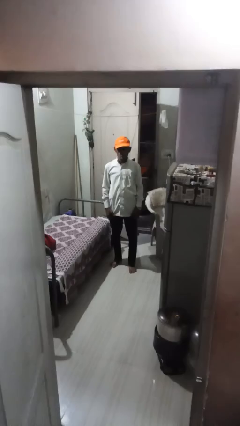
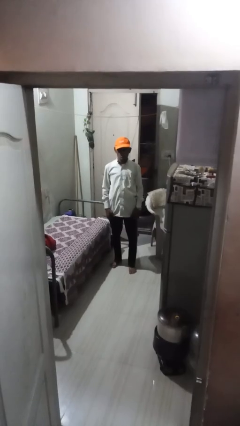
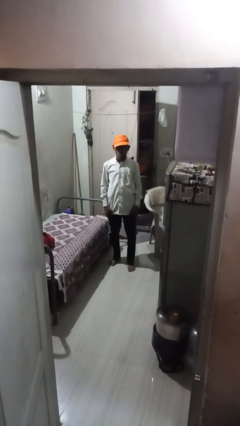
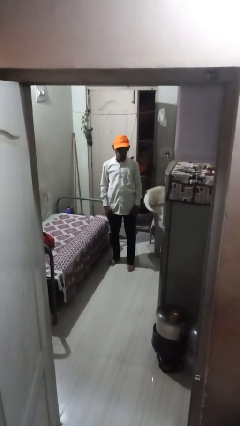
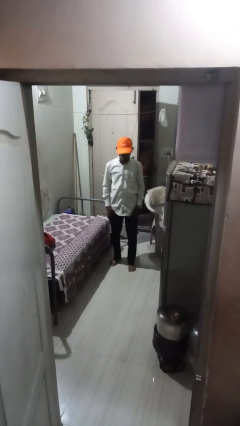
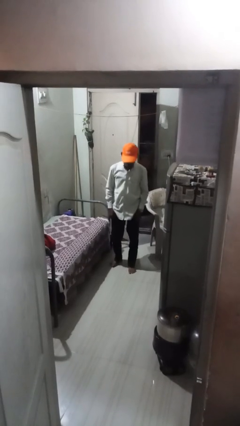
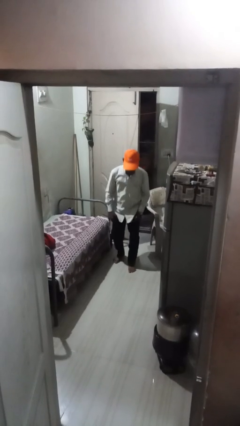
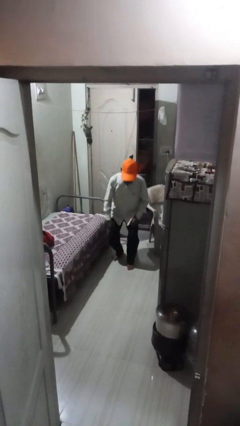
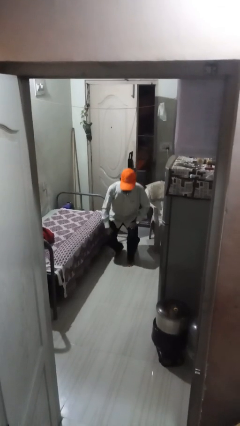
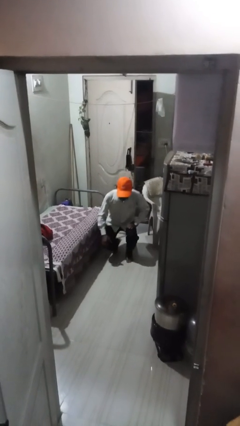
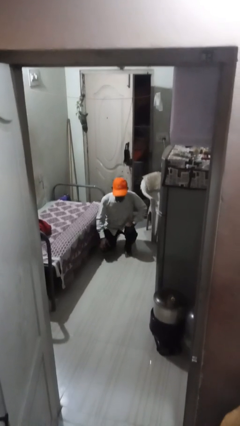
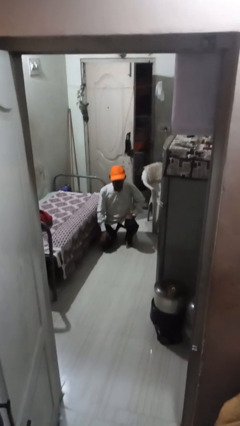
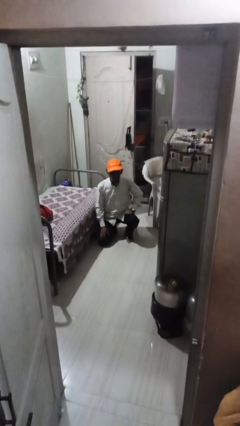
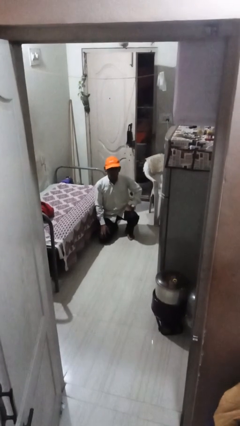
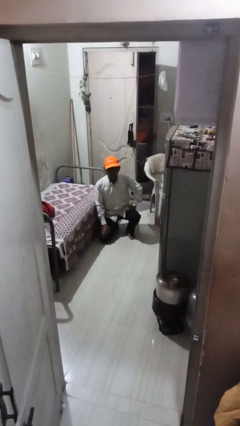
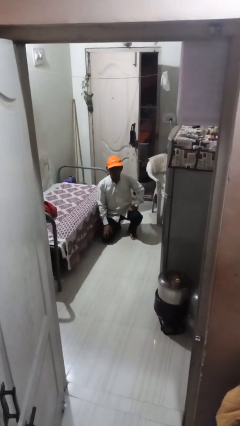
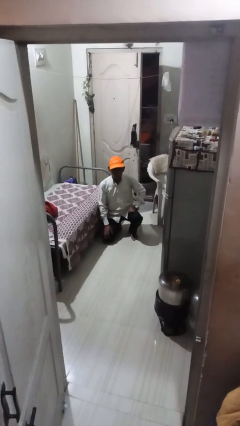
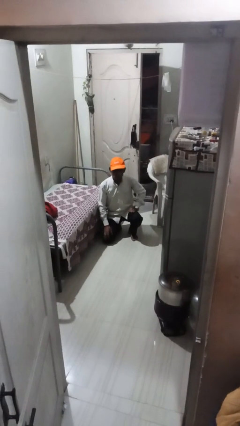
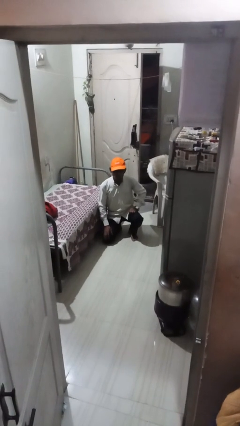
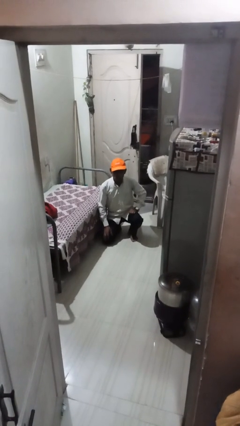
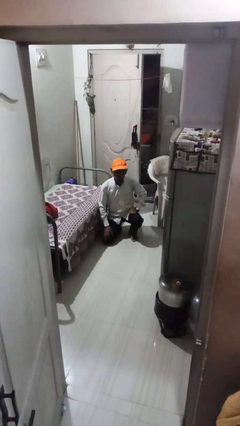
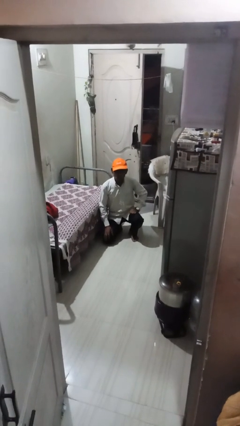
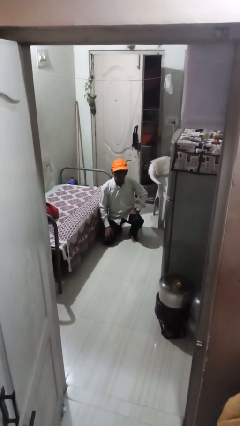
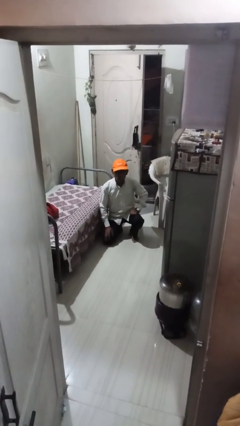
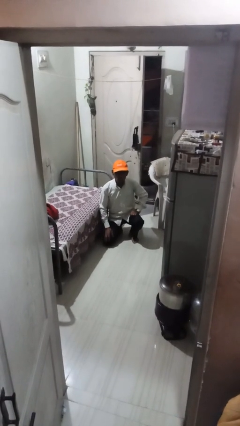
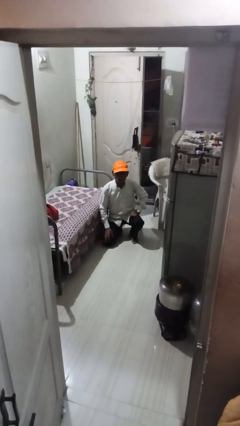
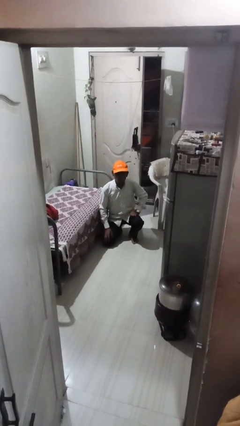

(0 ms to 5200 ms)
person kneels

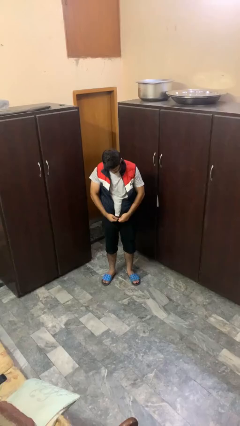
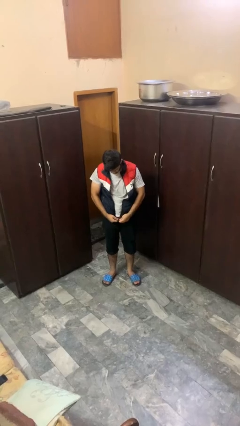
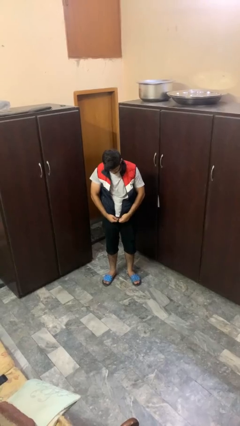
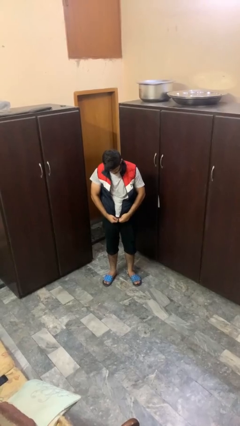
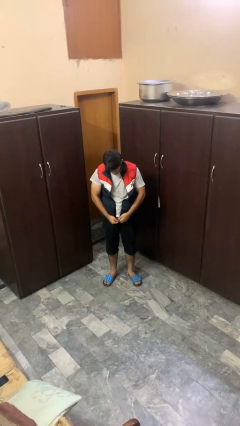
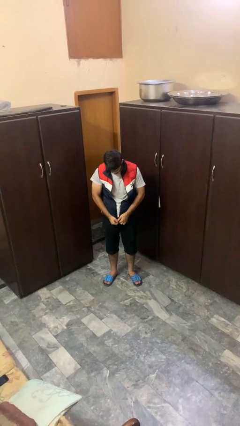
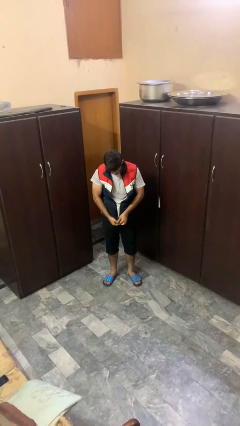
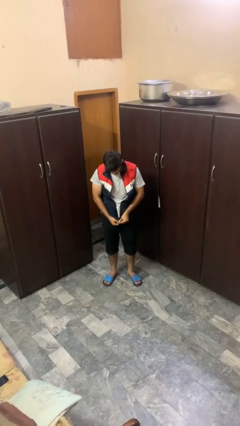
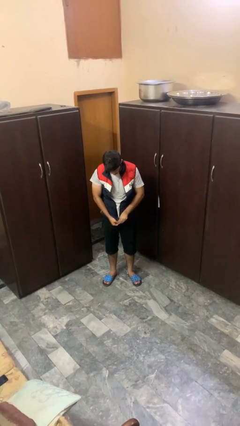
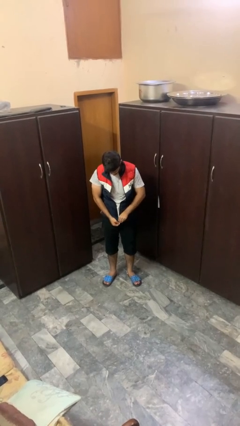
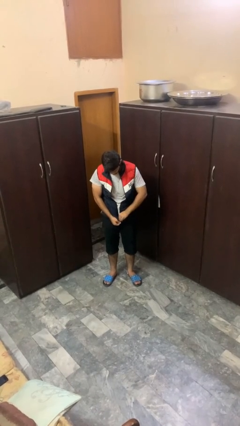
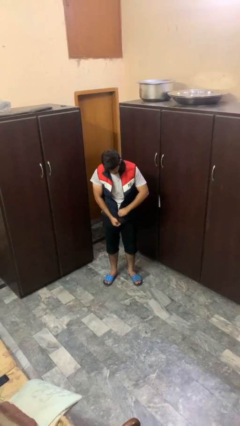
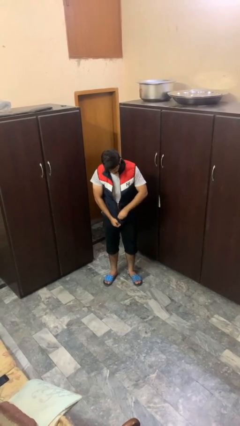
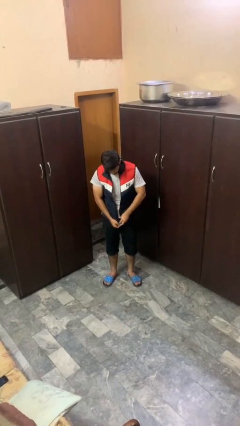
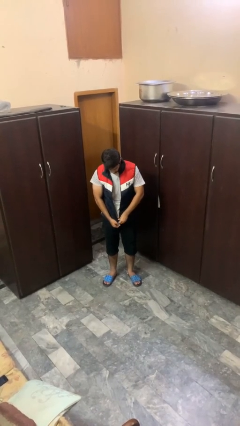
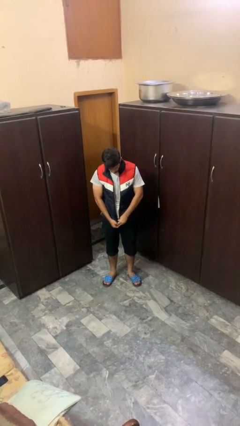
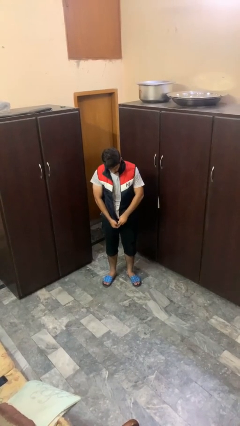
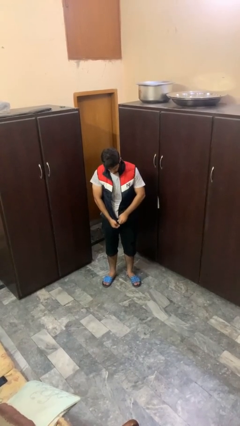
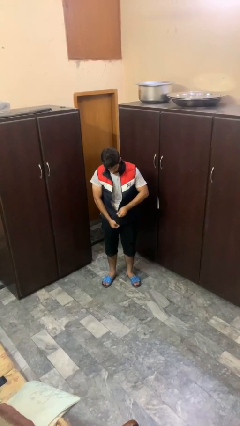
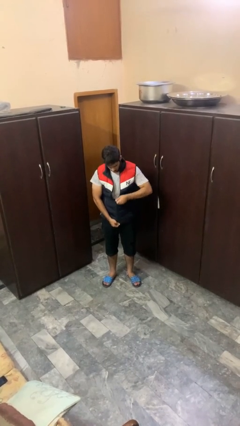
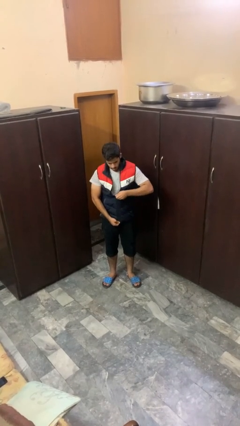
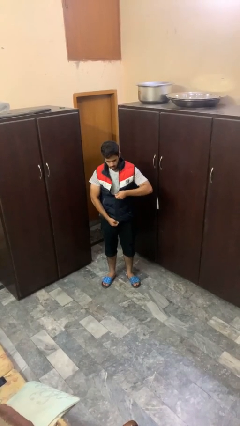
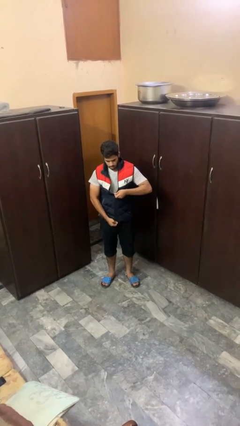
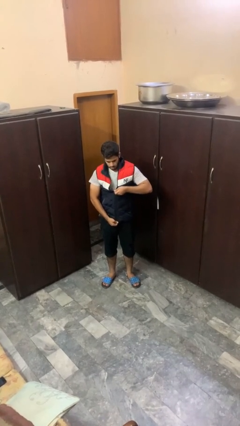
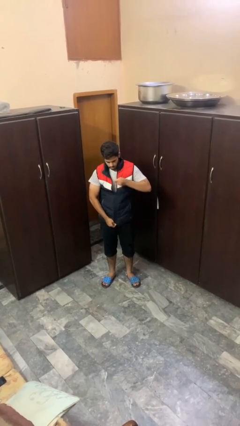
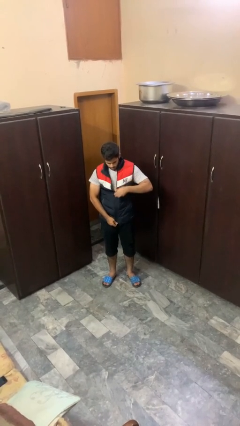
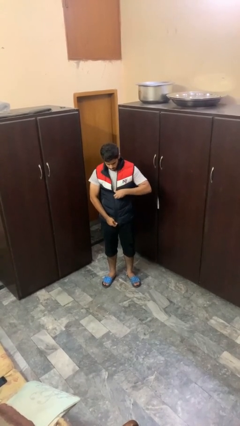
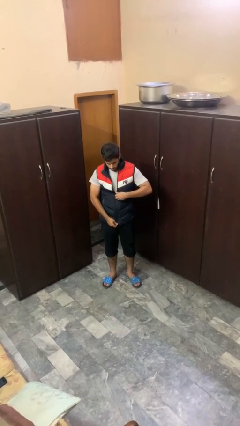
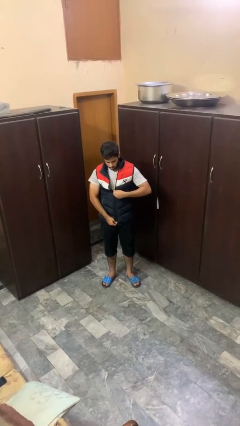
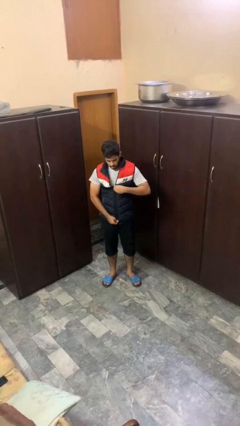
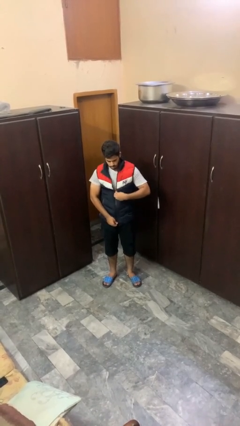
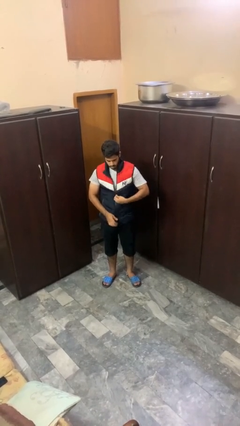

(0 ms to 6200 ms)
person zips up jacket

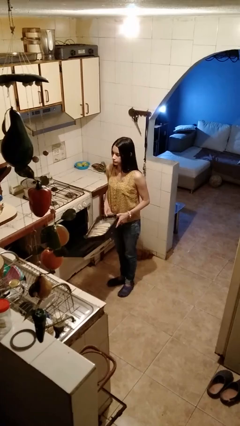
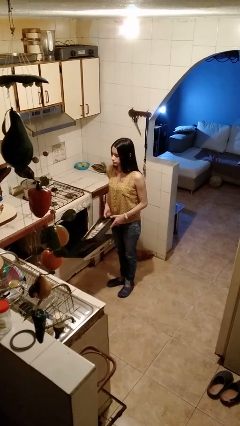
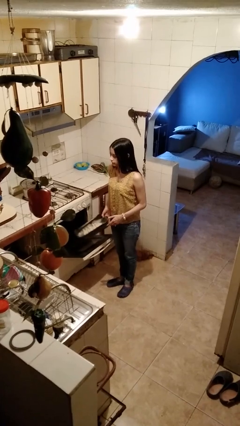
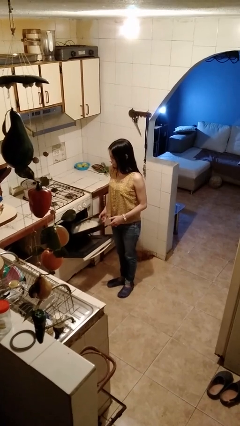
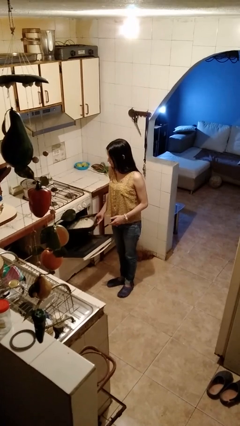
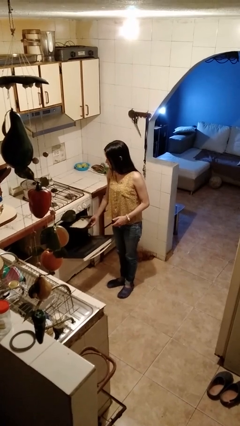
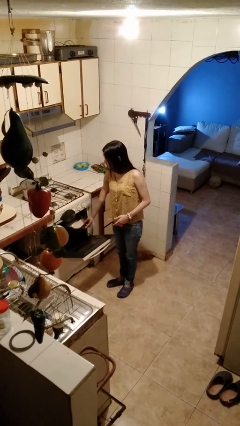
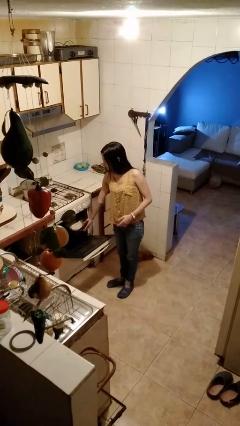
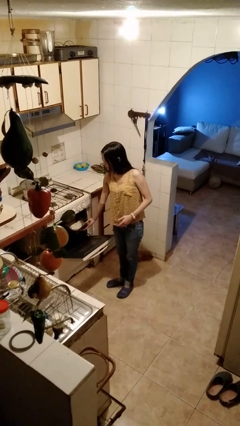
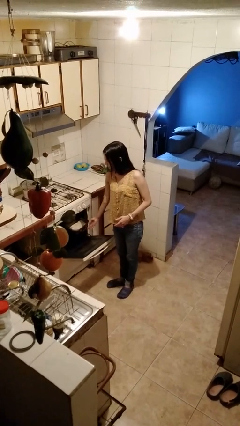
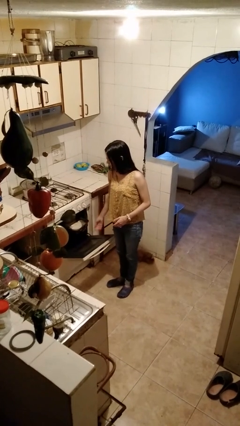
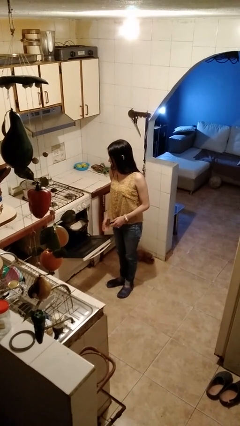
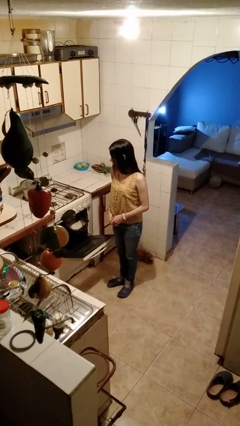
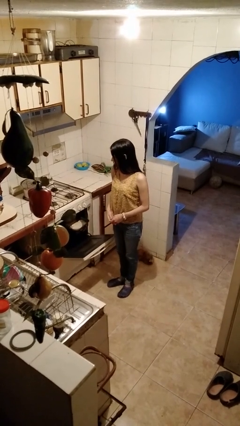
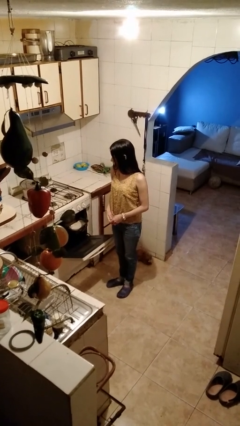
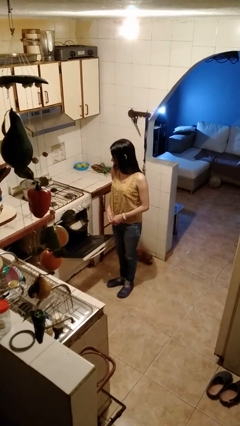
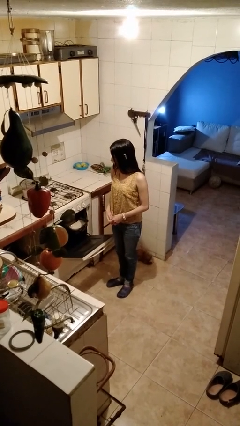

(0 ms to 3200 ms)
person puts object into oven

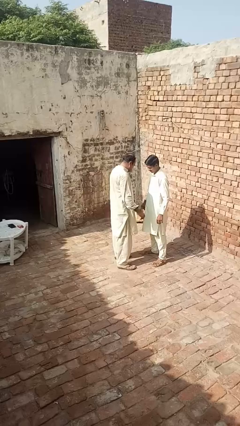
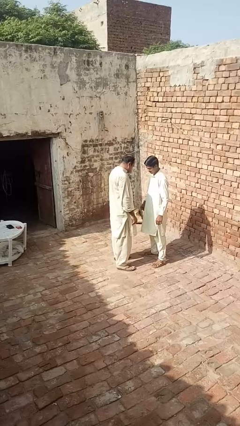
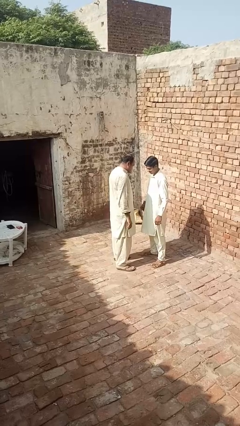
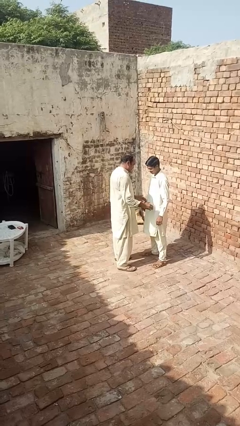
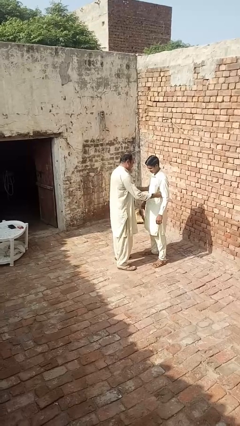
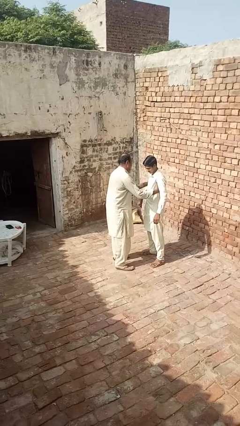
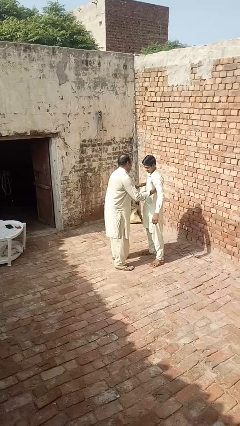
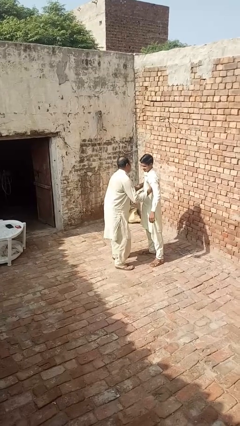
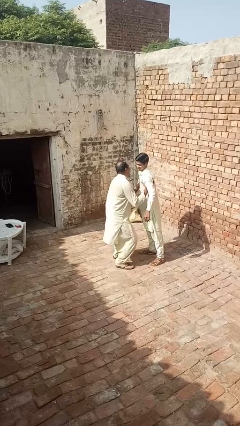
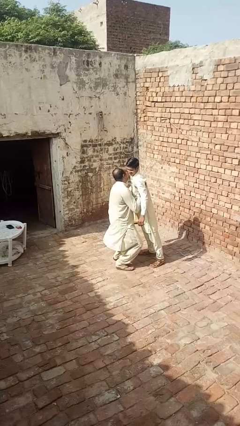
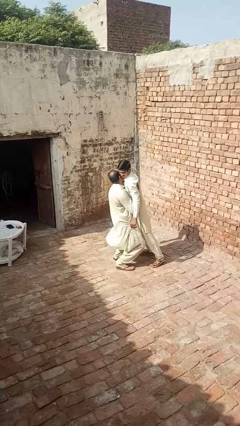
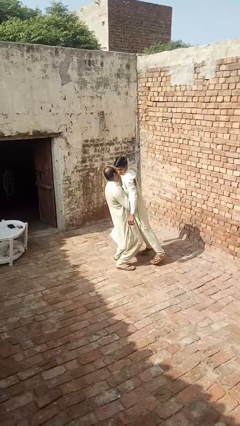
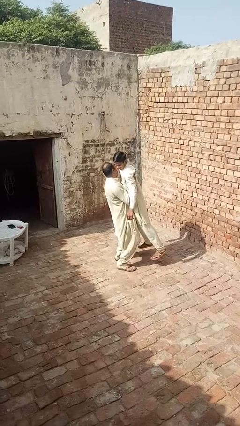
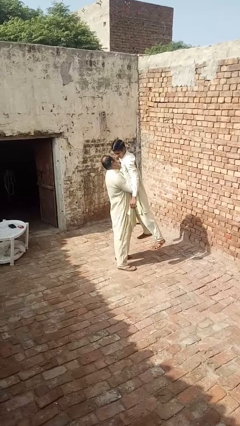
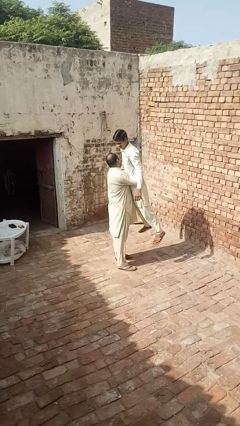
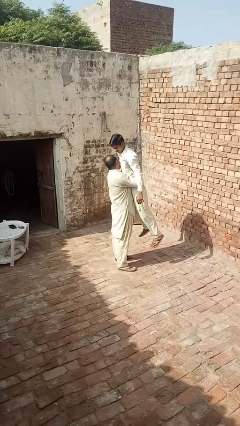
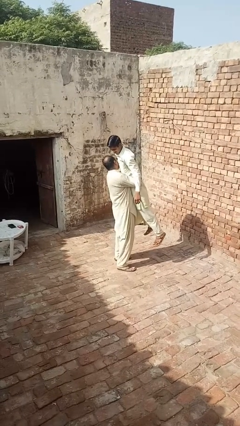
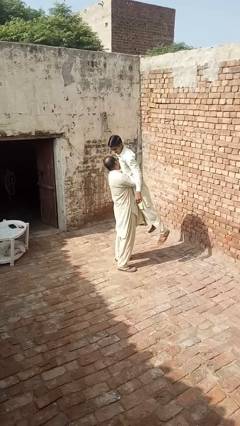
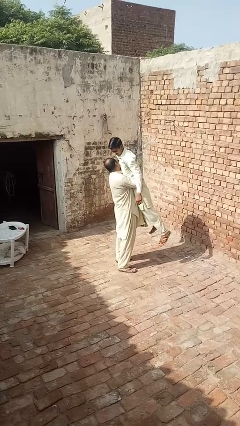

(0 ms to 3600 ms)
person picks up person
